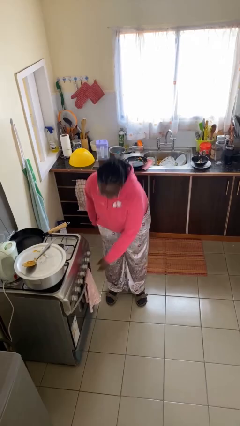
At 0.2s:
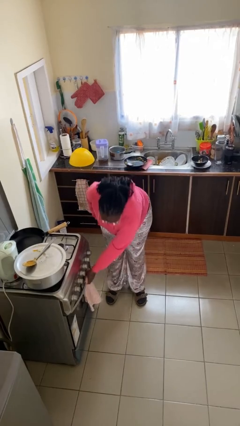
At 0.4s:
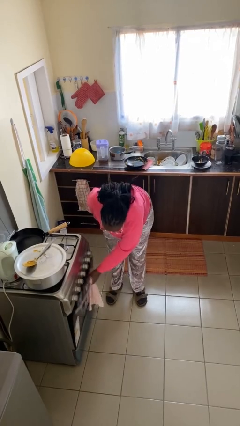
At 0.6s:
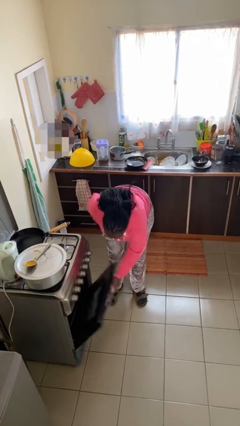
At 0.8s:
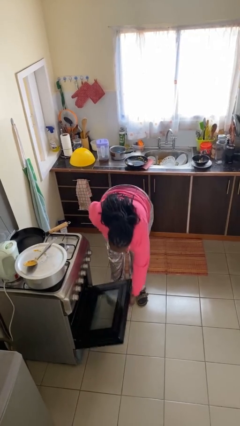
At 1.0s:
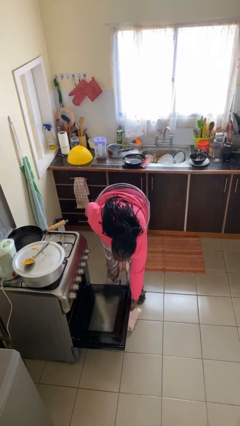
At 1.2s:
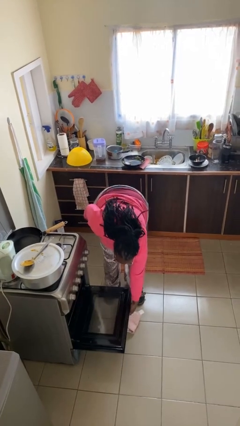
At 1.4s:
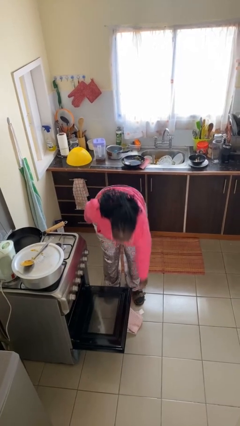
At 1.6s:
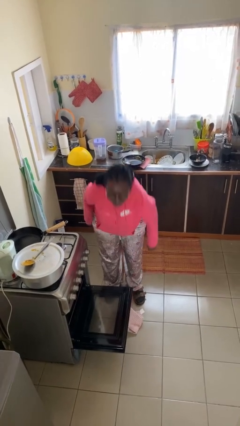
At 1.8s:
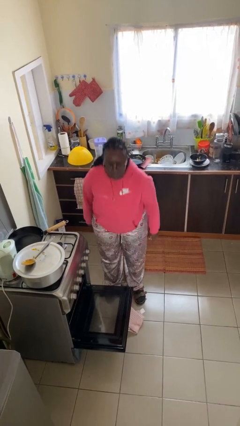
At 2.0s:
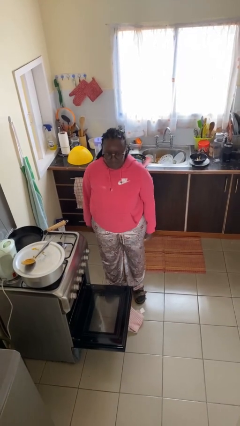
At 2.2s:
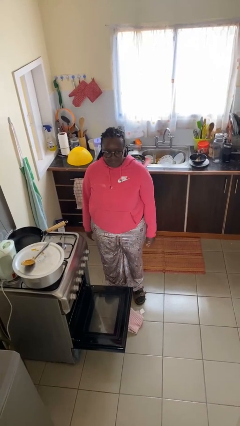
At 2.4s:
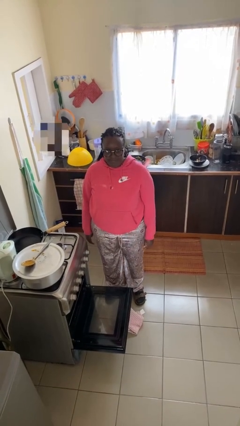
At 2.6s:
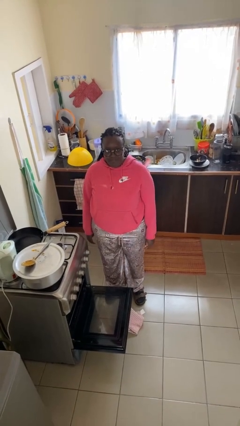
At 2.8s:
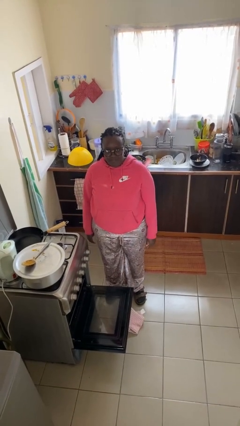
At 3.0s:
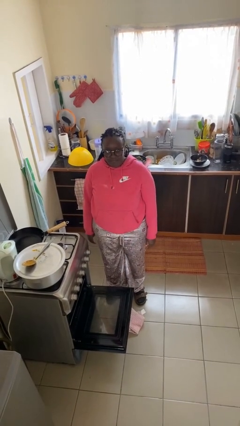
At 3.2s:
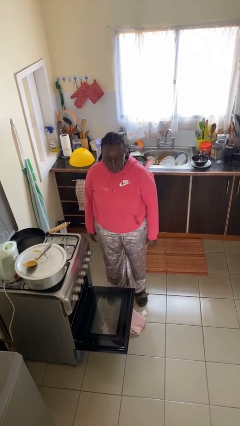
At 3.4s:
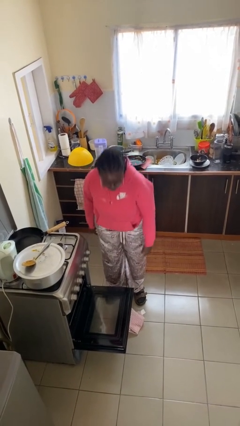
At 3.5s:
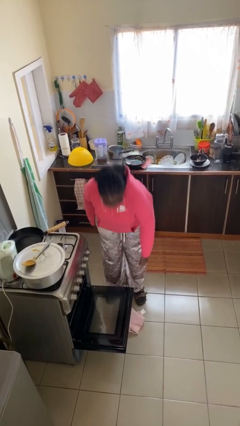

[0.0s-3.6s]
person opens oven door

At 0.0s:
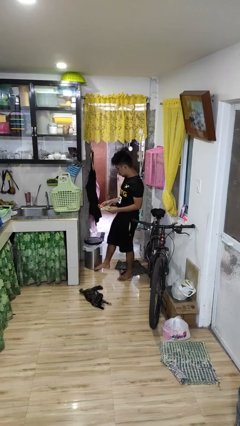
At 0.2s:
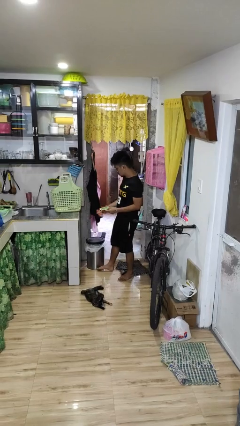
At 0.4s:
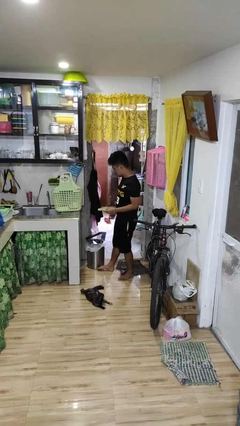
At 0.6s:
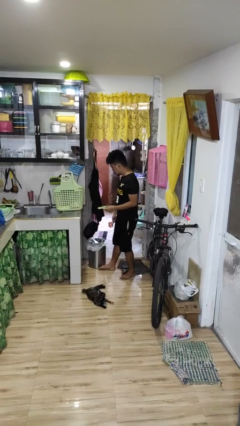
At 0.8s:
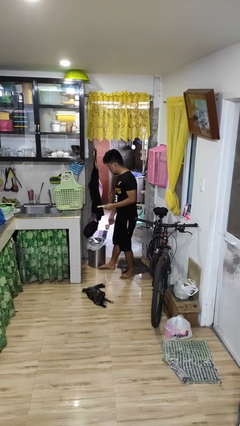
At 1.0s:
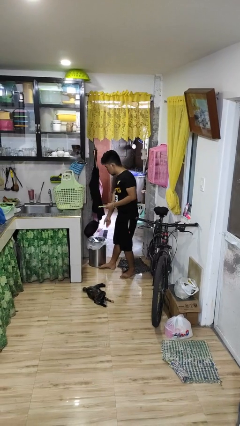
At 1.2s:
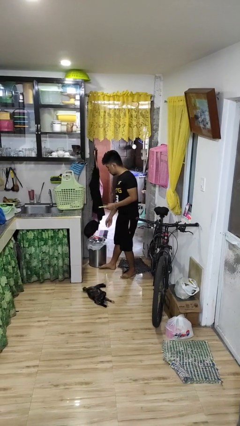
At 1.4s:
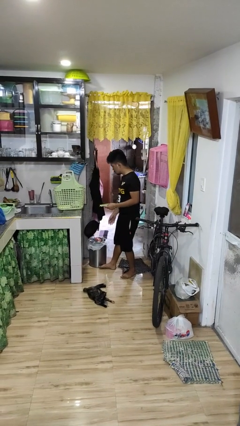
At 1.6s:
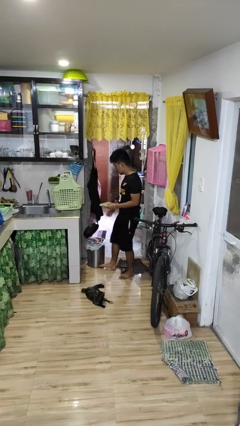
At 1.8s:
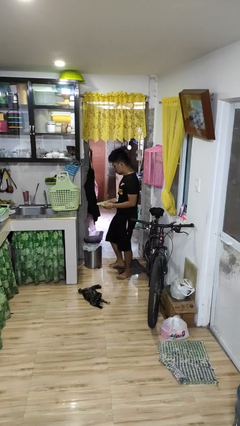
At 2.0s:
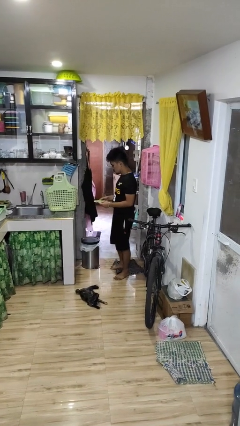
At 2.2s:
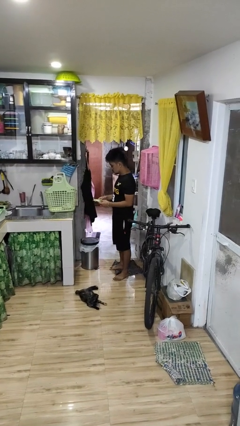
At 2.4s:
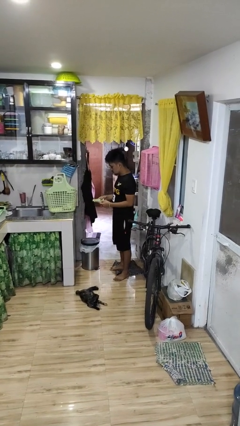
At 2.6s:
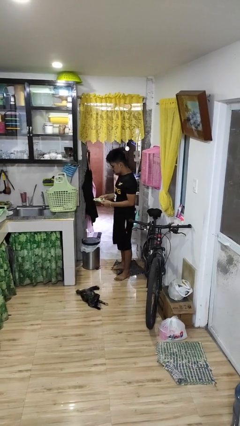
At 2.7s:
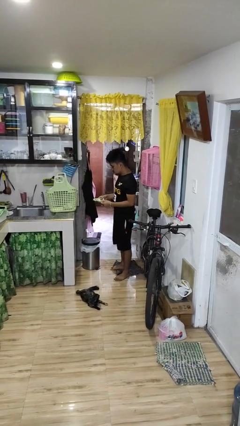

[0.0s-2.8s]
person discards trash

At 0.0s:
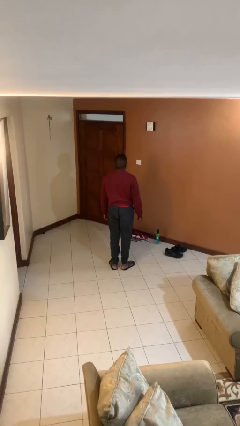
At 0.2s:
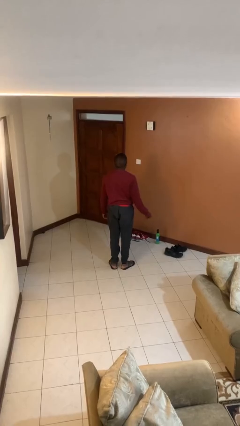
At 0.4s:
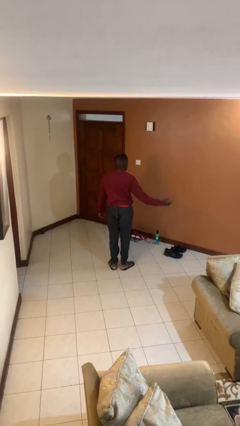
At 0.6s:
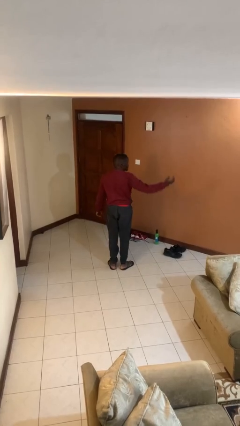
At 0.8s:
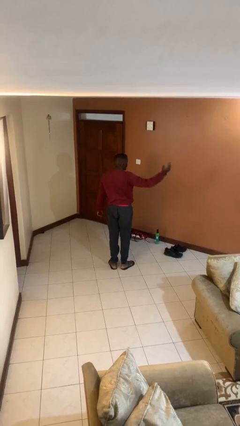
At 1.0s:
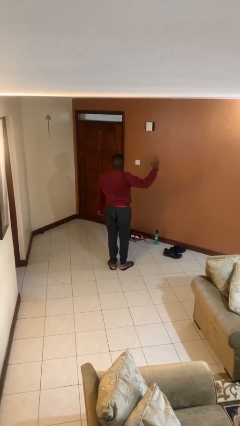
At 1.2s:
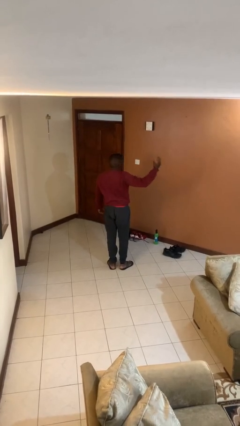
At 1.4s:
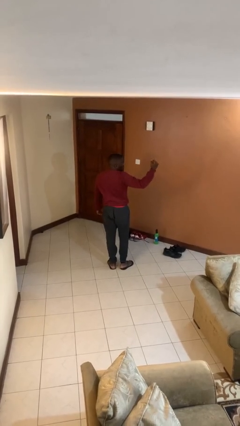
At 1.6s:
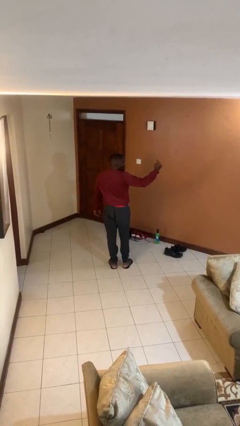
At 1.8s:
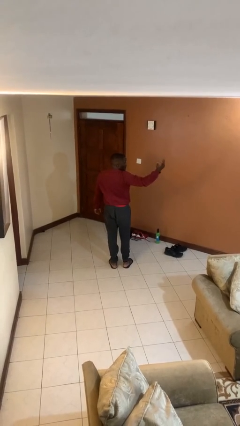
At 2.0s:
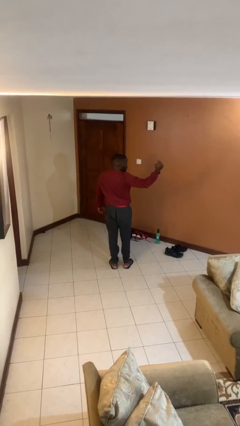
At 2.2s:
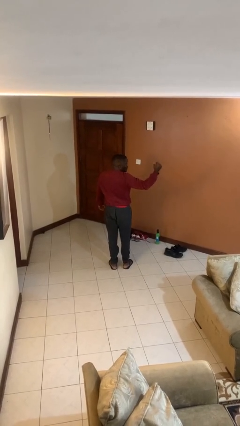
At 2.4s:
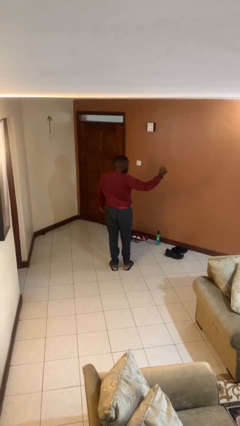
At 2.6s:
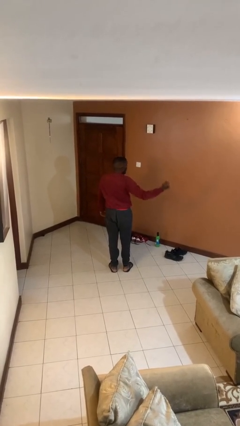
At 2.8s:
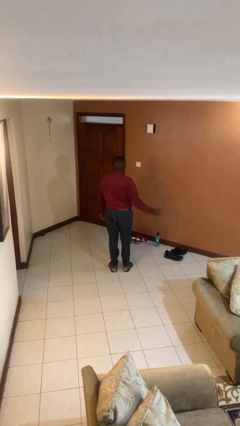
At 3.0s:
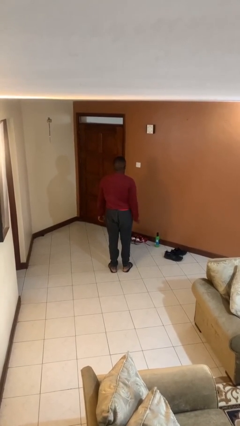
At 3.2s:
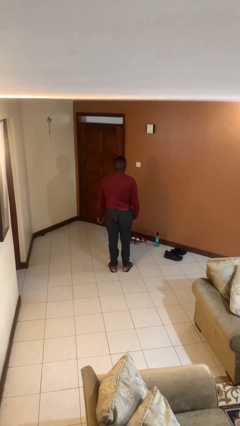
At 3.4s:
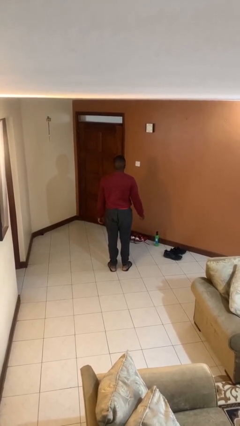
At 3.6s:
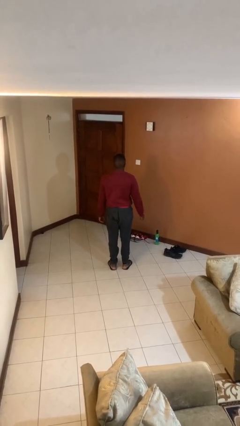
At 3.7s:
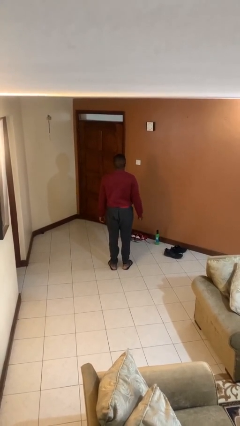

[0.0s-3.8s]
person gestures come here

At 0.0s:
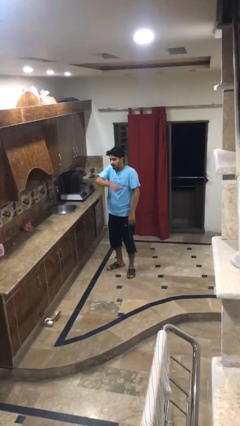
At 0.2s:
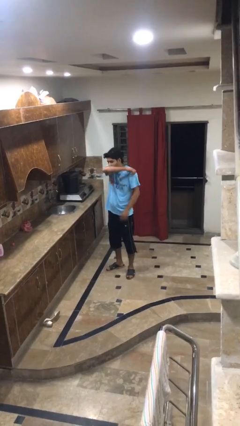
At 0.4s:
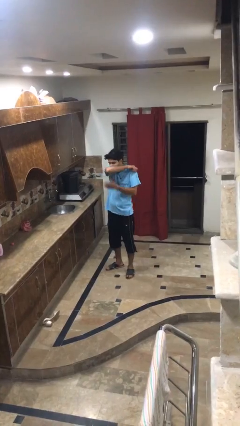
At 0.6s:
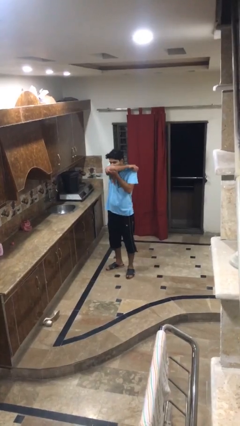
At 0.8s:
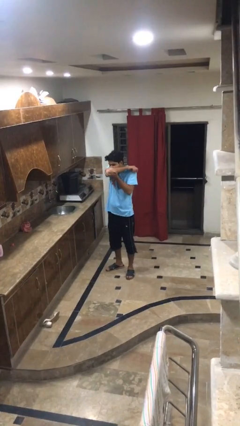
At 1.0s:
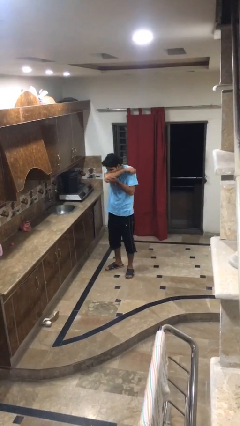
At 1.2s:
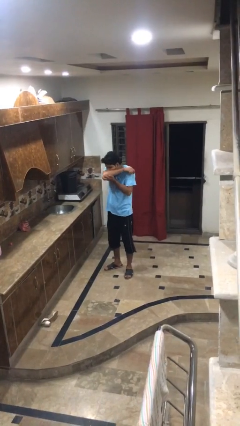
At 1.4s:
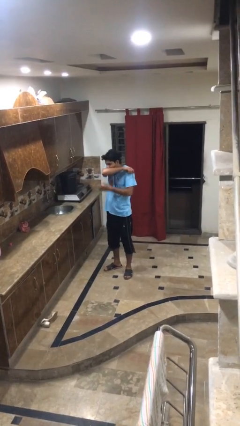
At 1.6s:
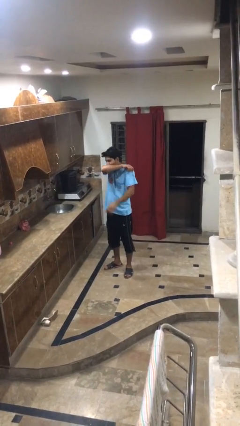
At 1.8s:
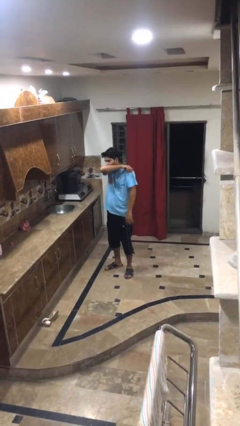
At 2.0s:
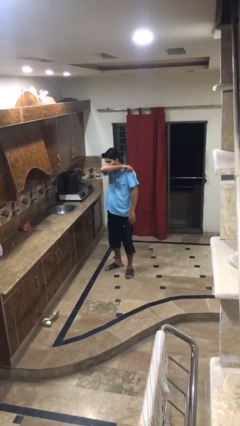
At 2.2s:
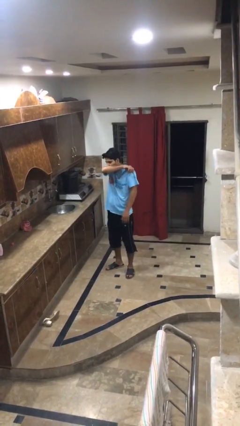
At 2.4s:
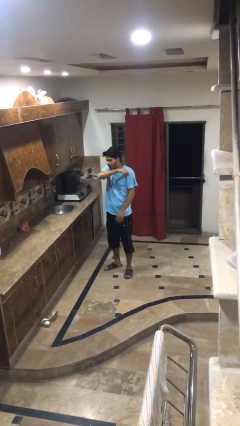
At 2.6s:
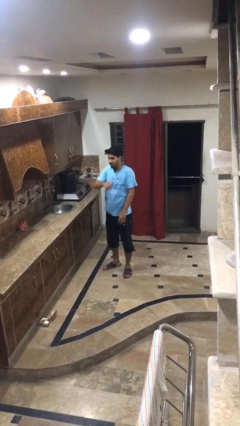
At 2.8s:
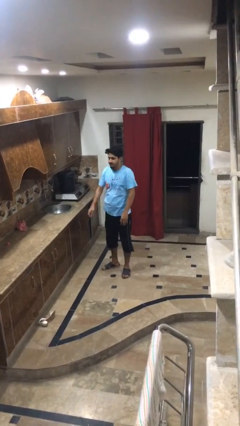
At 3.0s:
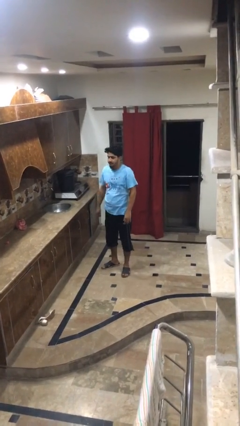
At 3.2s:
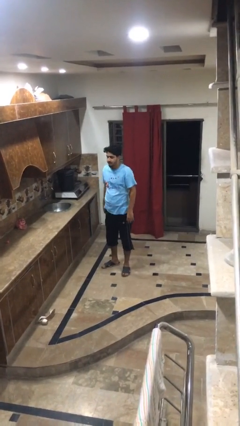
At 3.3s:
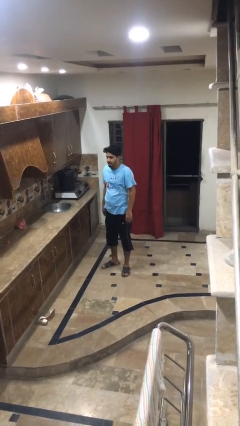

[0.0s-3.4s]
person sneezes into arm

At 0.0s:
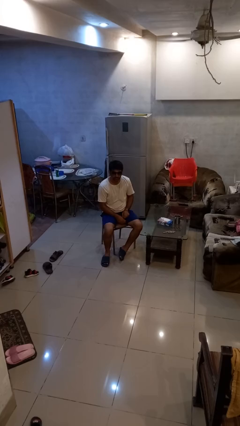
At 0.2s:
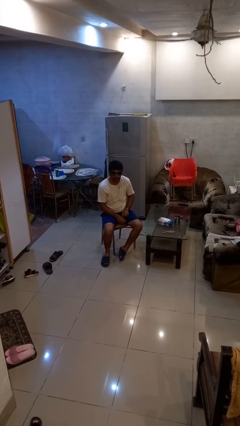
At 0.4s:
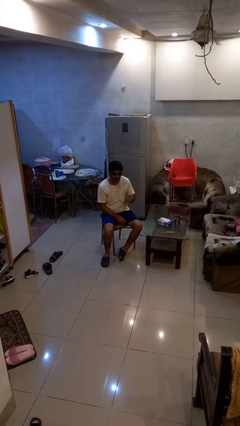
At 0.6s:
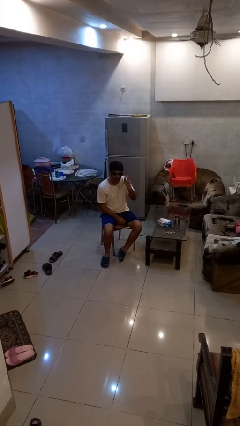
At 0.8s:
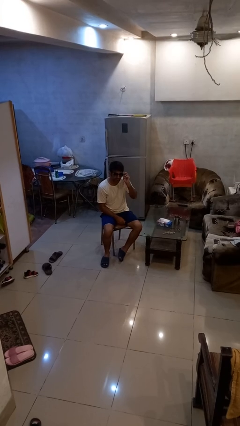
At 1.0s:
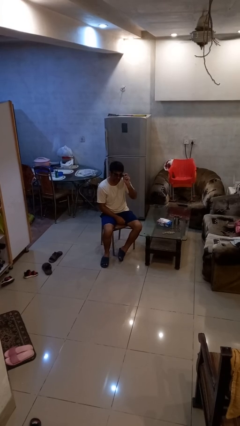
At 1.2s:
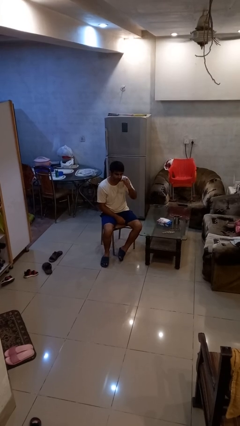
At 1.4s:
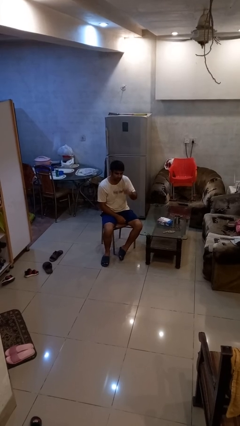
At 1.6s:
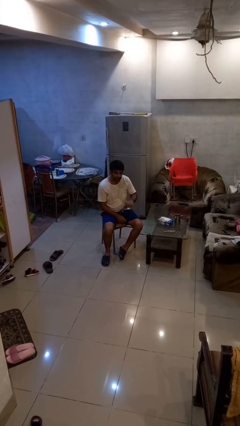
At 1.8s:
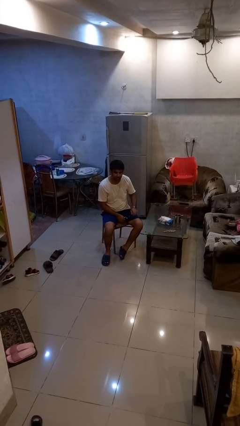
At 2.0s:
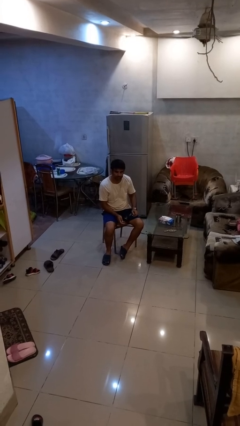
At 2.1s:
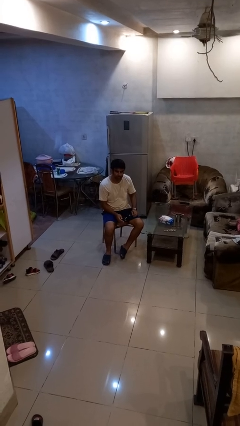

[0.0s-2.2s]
person takes off sunglasses

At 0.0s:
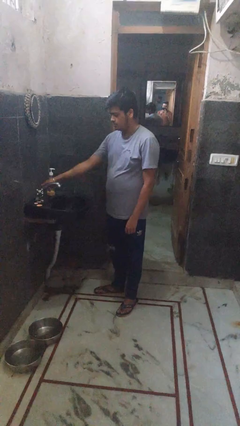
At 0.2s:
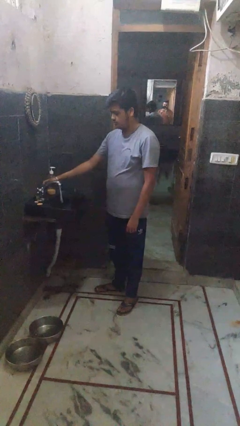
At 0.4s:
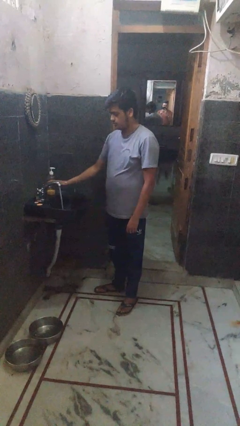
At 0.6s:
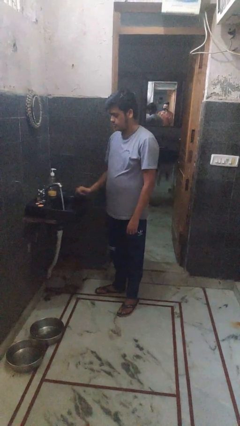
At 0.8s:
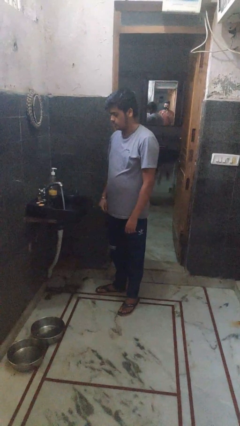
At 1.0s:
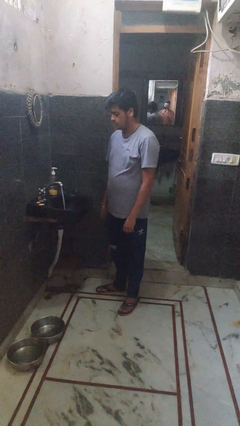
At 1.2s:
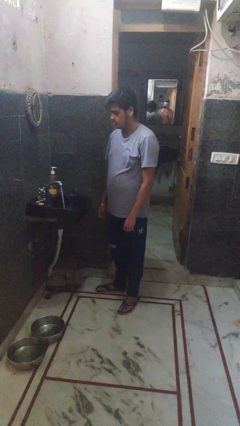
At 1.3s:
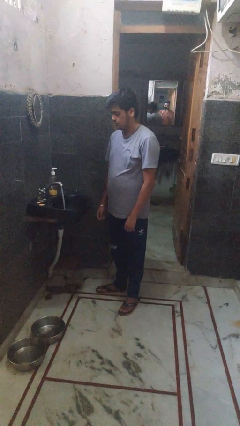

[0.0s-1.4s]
person turns on faucet
